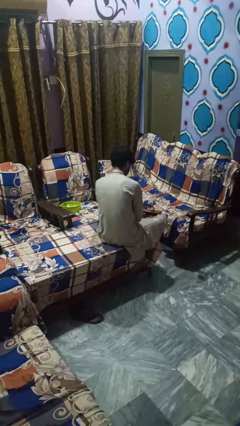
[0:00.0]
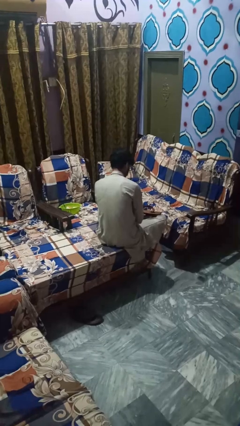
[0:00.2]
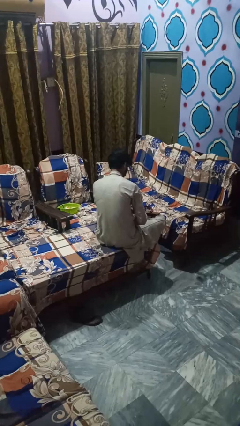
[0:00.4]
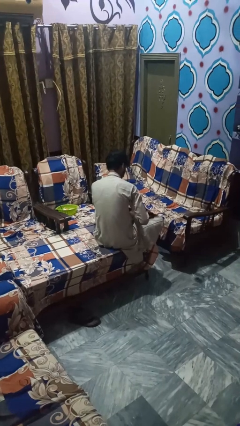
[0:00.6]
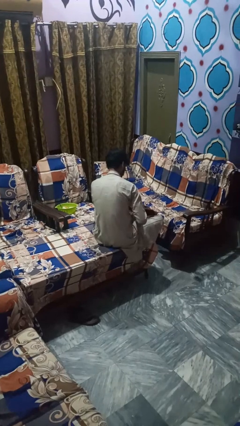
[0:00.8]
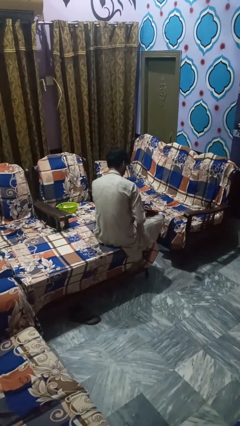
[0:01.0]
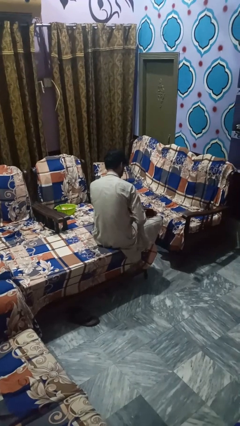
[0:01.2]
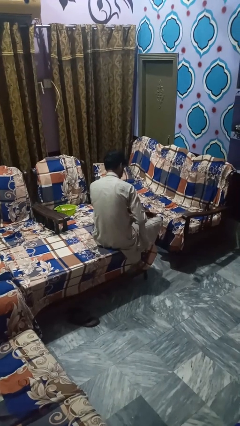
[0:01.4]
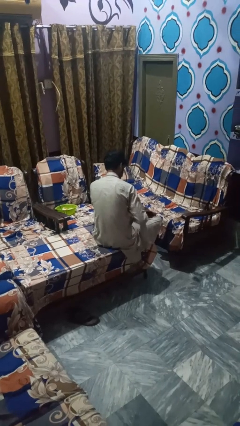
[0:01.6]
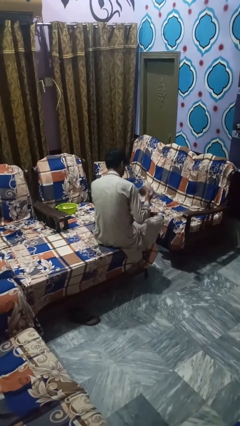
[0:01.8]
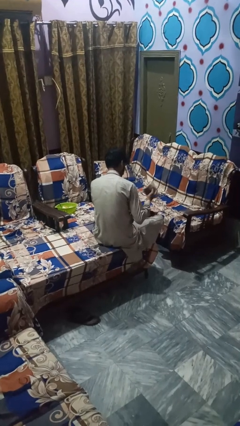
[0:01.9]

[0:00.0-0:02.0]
person takes object from bag

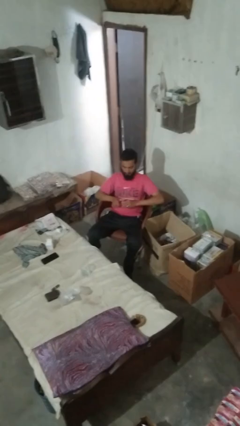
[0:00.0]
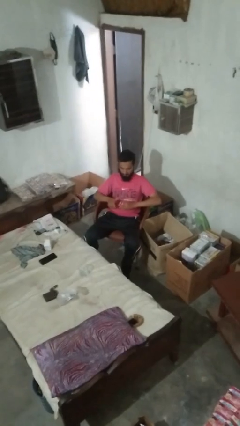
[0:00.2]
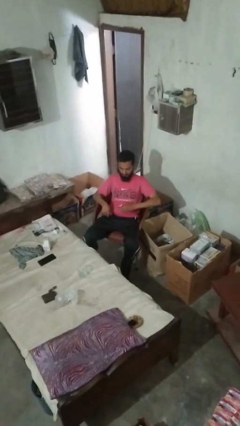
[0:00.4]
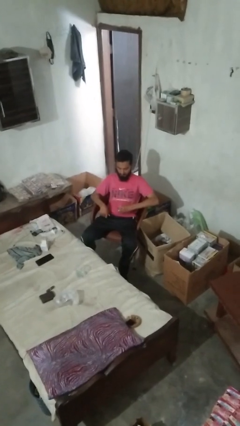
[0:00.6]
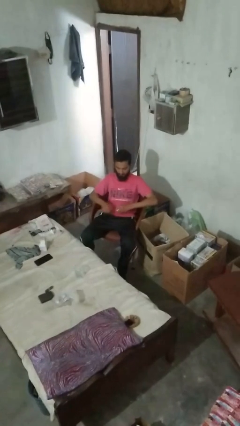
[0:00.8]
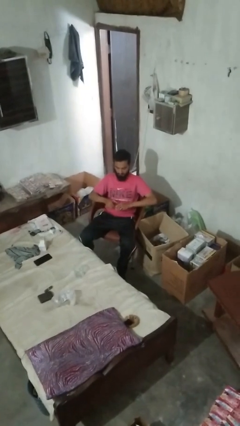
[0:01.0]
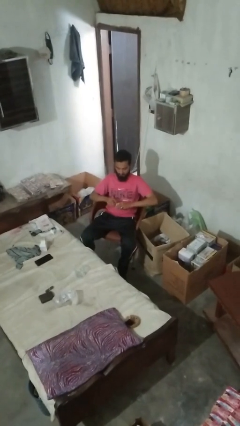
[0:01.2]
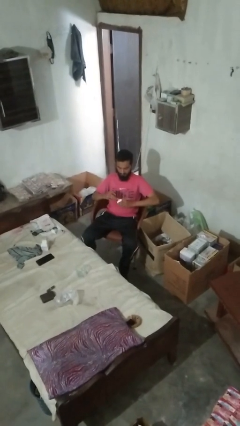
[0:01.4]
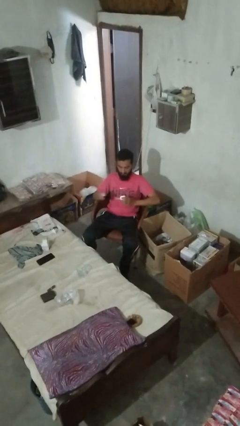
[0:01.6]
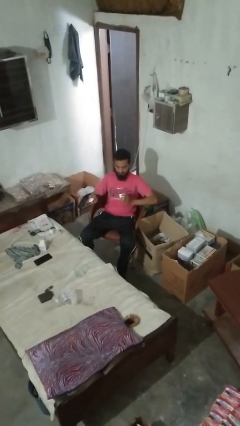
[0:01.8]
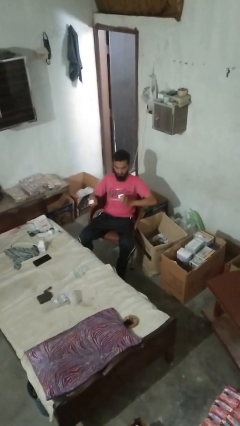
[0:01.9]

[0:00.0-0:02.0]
person opens jar

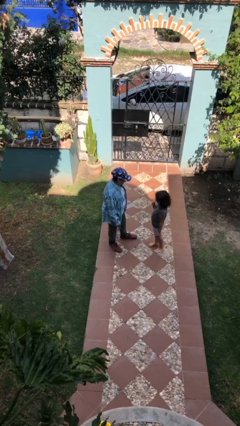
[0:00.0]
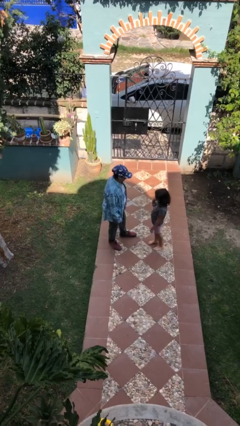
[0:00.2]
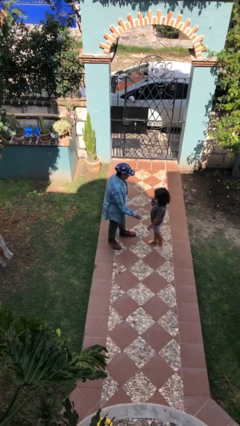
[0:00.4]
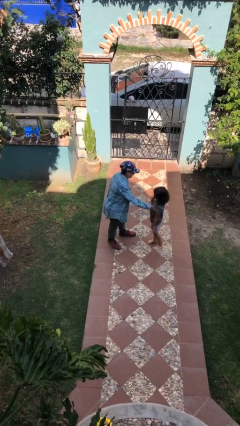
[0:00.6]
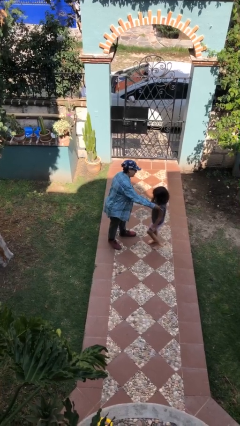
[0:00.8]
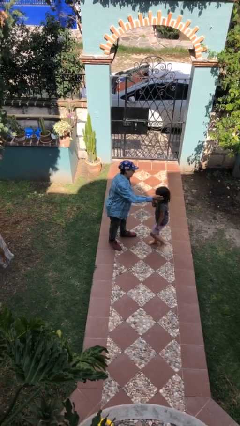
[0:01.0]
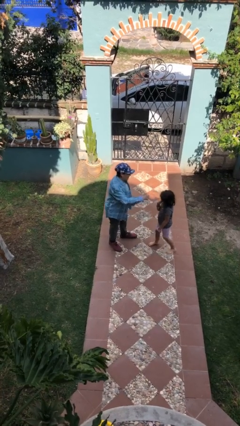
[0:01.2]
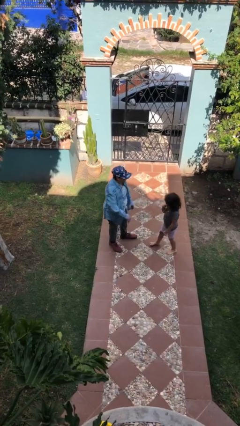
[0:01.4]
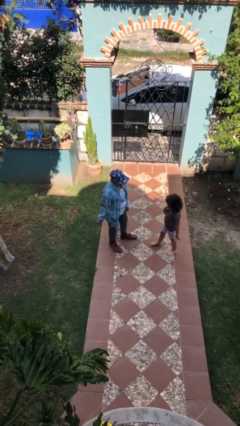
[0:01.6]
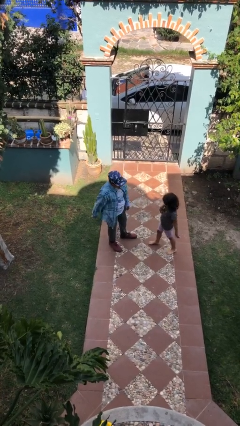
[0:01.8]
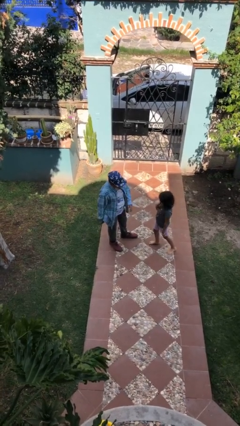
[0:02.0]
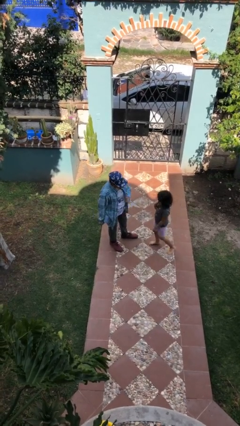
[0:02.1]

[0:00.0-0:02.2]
person shoves person

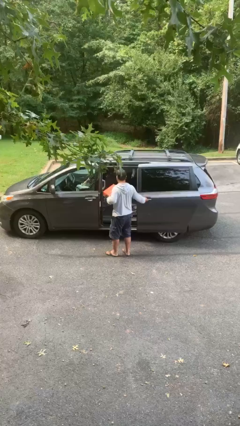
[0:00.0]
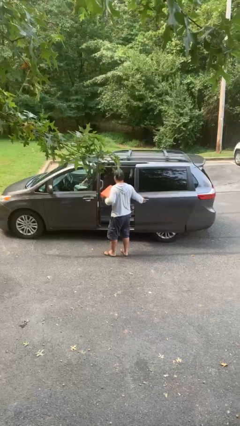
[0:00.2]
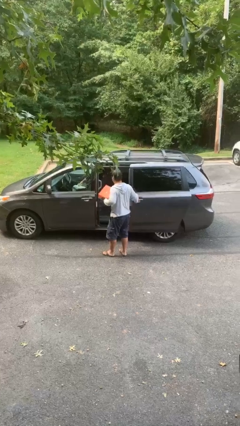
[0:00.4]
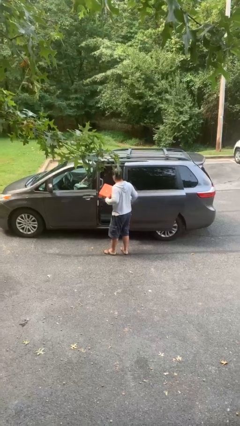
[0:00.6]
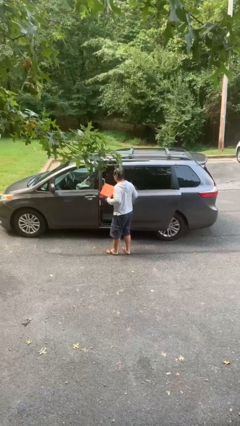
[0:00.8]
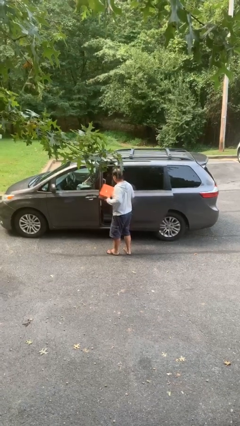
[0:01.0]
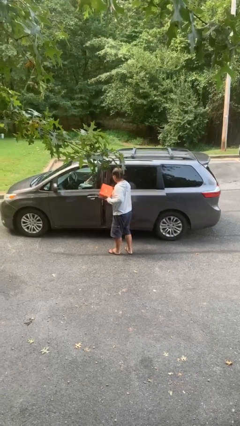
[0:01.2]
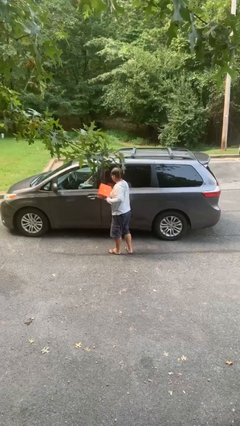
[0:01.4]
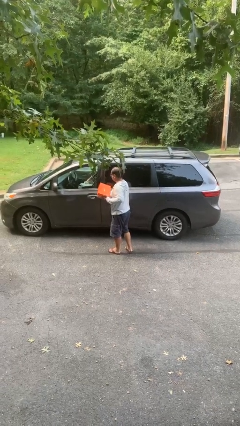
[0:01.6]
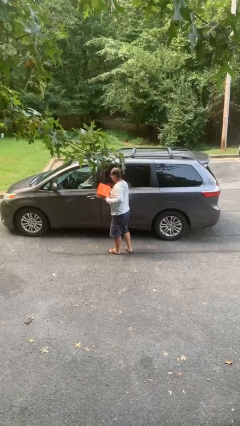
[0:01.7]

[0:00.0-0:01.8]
person closes car door

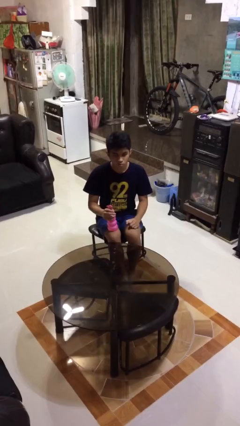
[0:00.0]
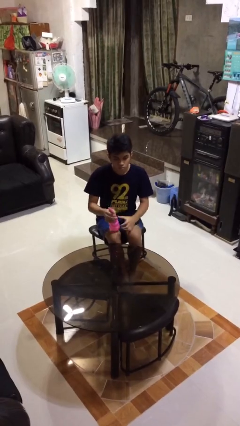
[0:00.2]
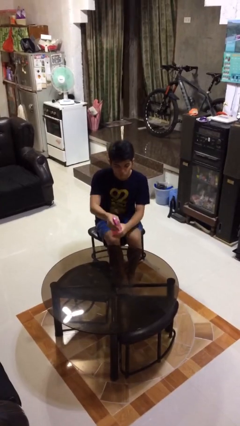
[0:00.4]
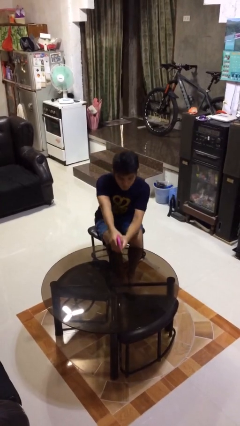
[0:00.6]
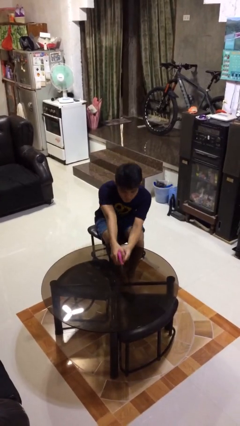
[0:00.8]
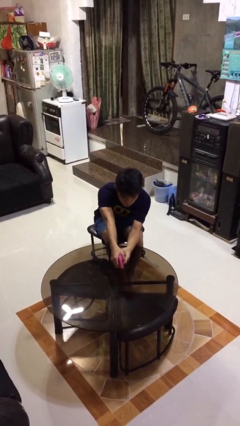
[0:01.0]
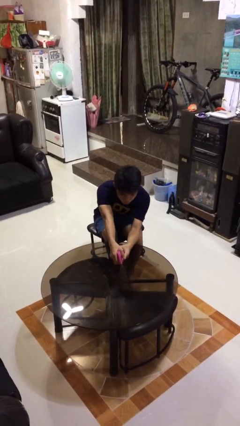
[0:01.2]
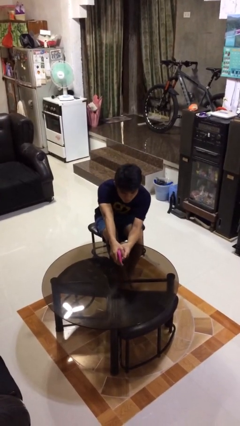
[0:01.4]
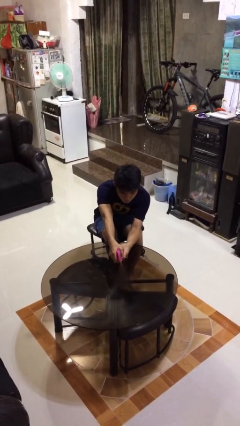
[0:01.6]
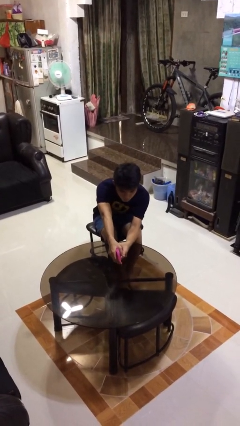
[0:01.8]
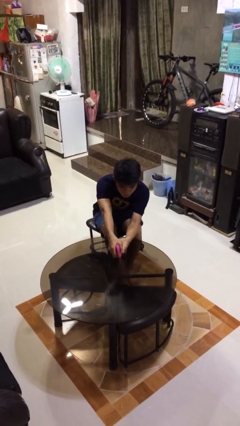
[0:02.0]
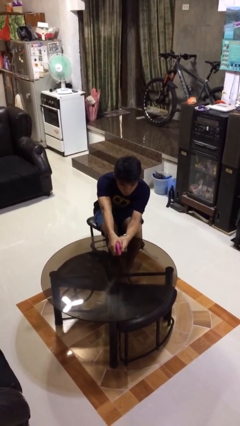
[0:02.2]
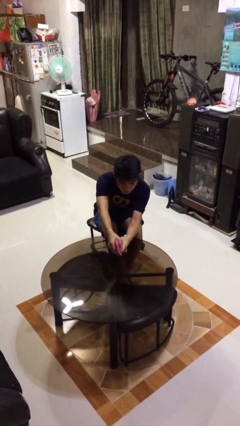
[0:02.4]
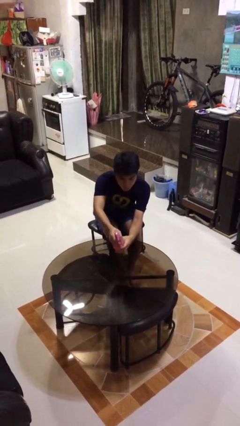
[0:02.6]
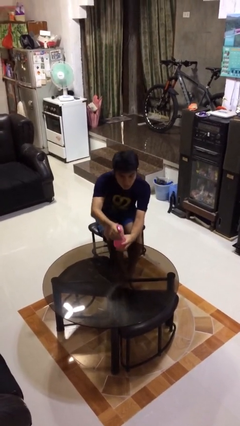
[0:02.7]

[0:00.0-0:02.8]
person sprays from bottle

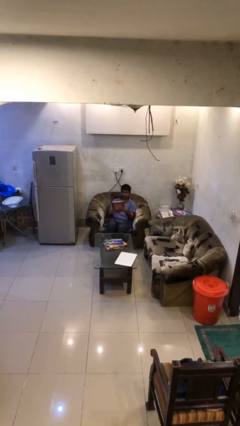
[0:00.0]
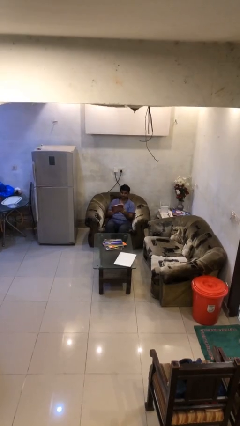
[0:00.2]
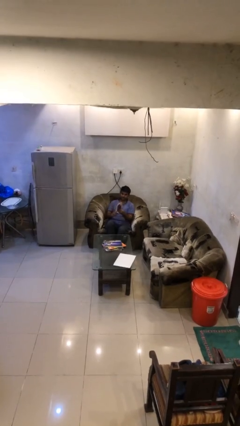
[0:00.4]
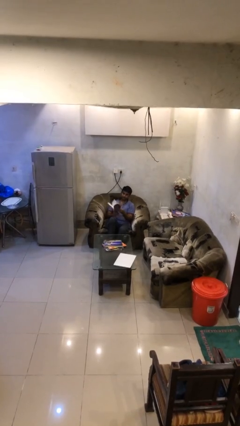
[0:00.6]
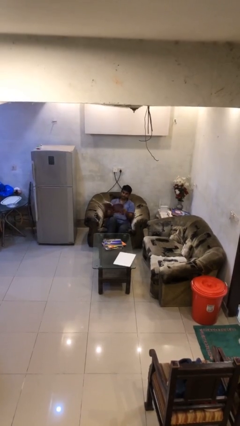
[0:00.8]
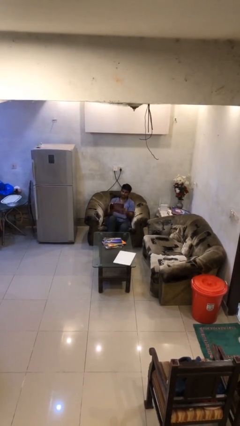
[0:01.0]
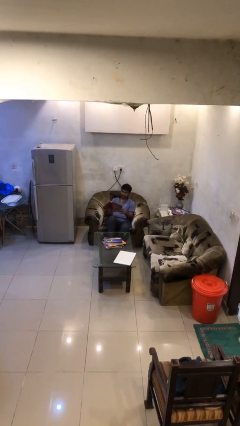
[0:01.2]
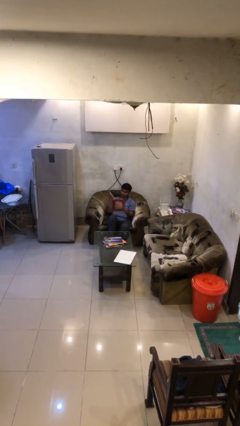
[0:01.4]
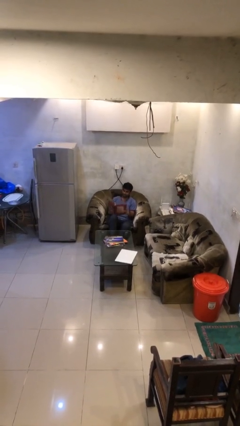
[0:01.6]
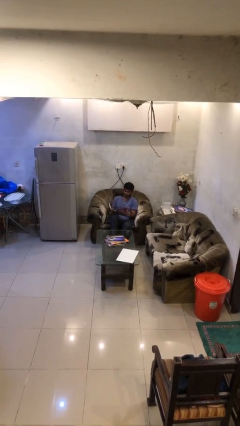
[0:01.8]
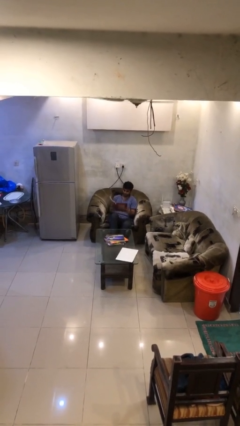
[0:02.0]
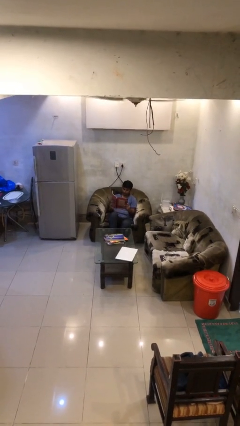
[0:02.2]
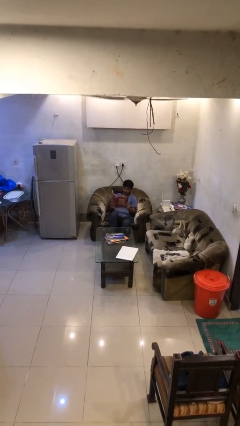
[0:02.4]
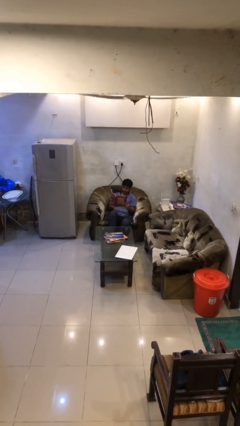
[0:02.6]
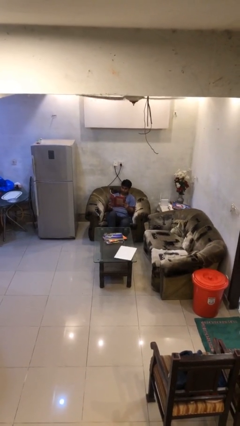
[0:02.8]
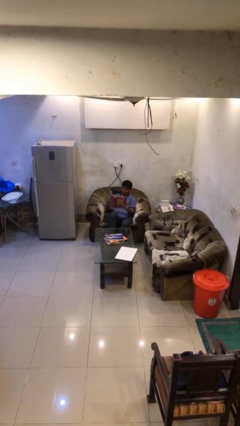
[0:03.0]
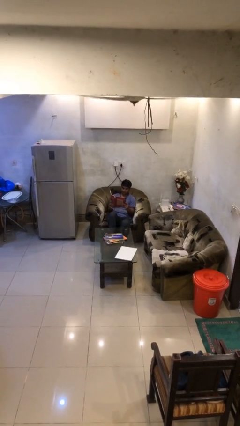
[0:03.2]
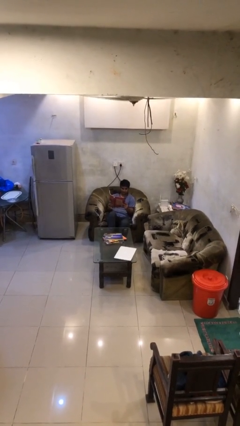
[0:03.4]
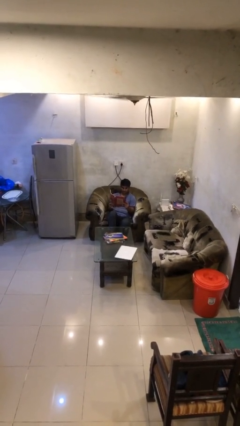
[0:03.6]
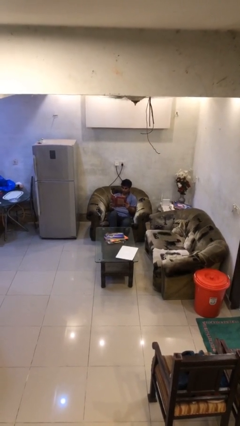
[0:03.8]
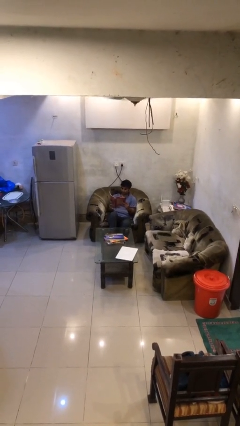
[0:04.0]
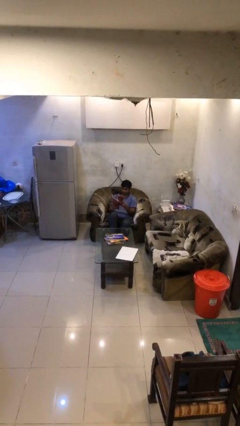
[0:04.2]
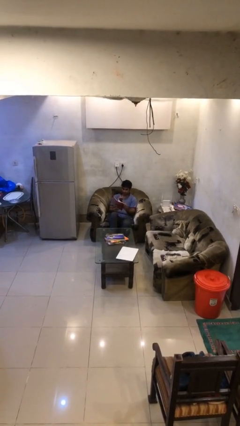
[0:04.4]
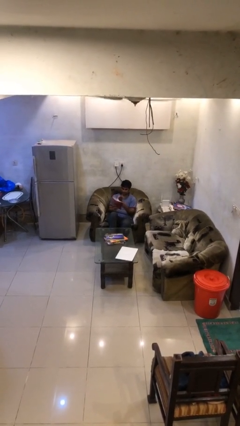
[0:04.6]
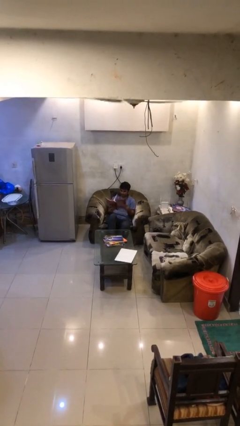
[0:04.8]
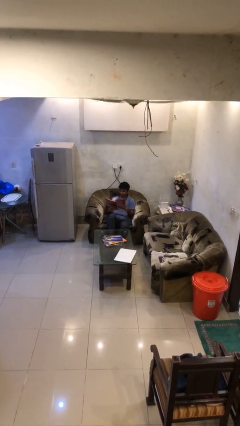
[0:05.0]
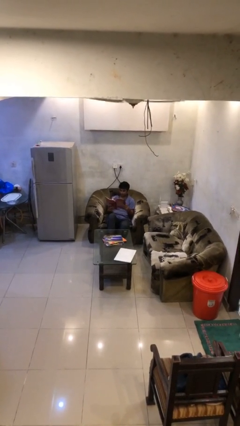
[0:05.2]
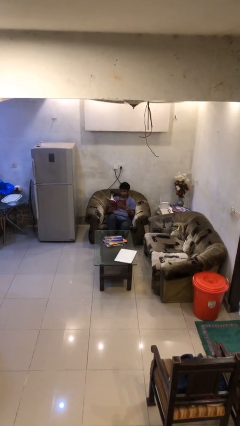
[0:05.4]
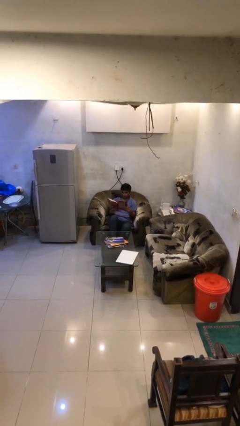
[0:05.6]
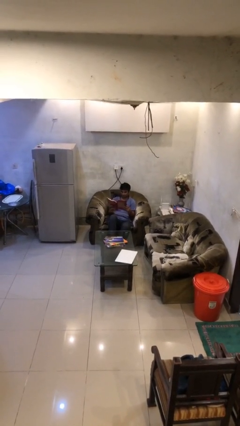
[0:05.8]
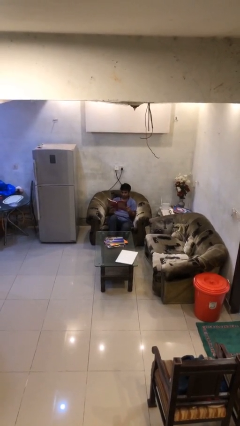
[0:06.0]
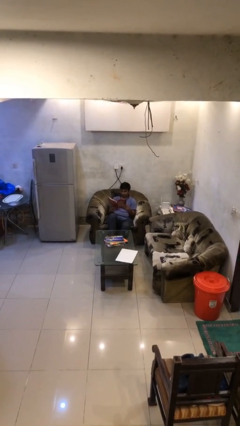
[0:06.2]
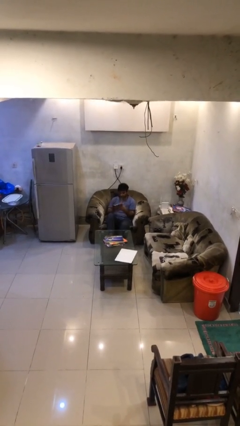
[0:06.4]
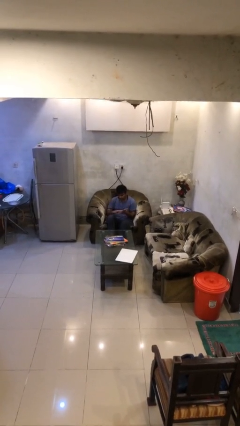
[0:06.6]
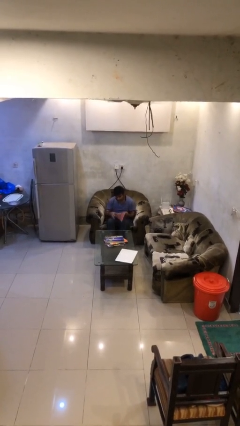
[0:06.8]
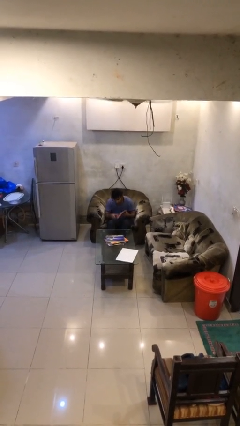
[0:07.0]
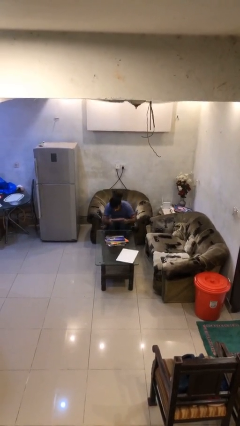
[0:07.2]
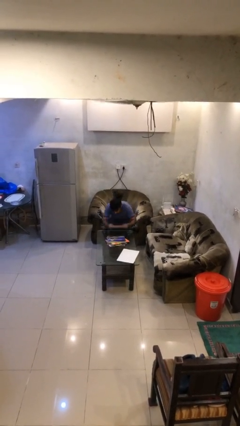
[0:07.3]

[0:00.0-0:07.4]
person reads document
